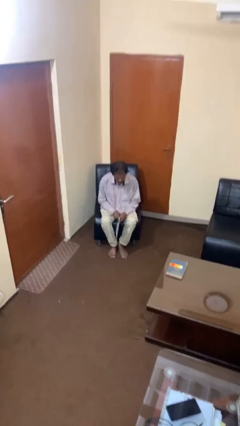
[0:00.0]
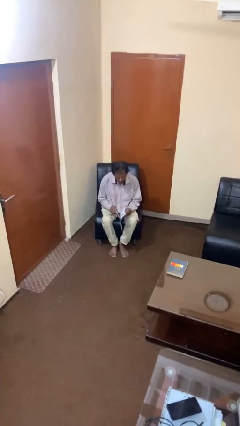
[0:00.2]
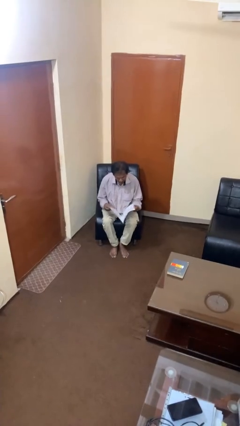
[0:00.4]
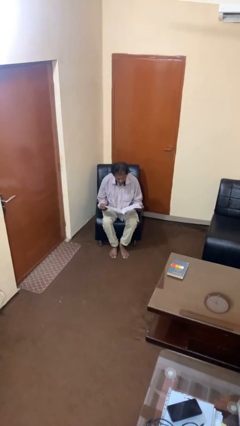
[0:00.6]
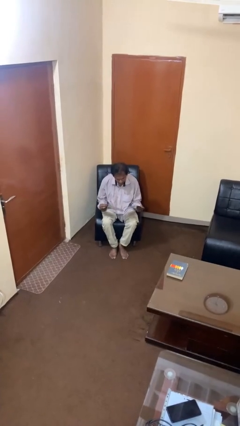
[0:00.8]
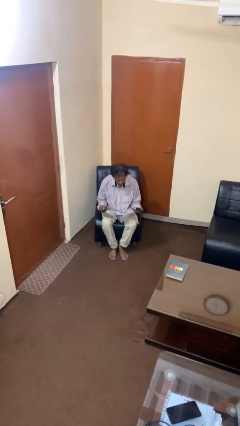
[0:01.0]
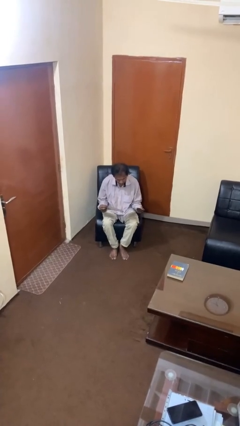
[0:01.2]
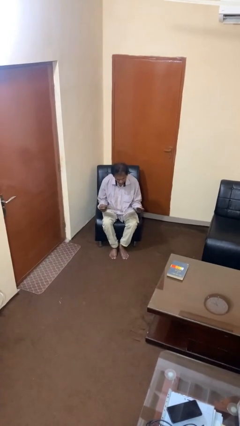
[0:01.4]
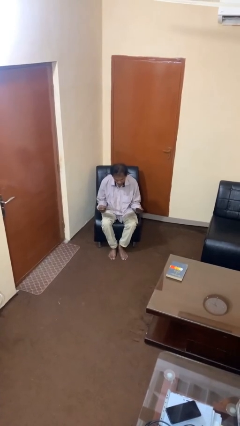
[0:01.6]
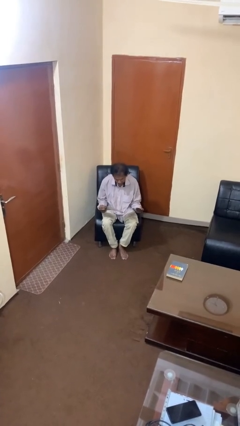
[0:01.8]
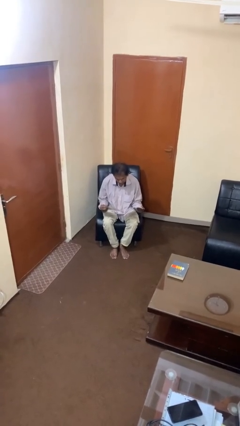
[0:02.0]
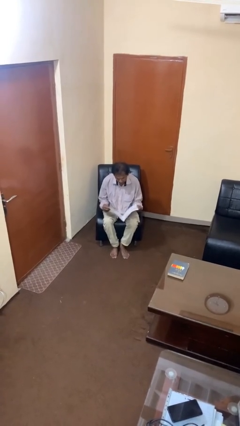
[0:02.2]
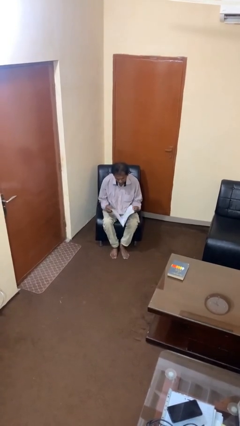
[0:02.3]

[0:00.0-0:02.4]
person reads magazine

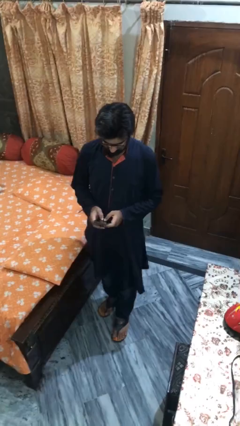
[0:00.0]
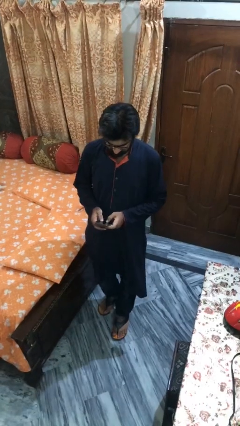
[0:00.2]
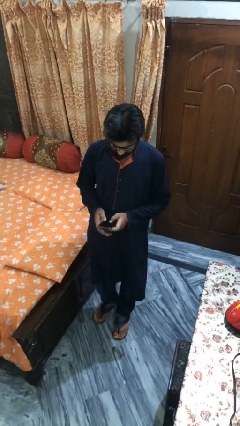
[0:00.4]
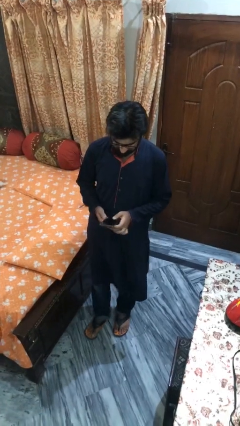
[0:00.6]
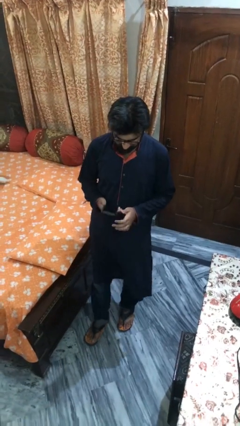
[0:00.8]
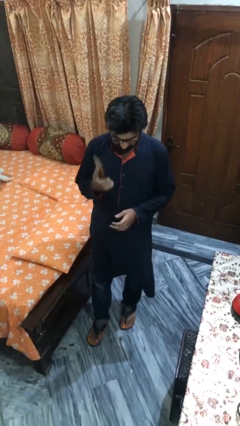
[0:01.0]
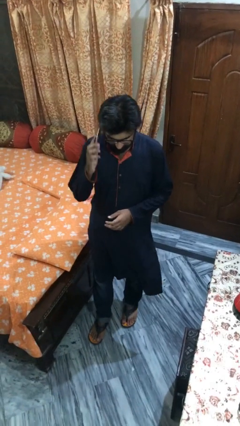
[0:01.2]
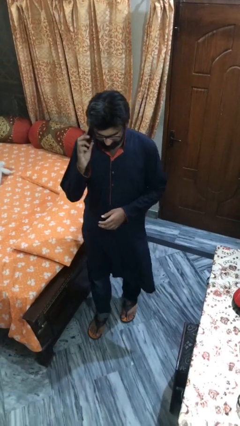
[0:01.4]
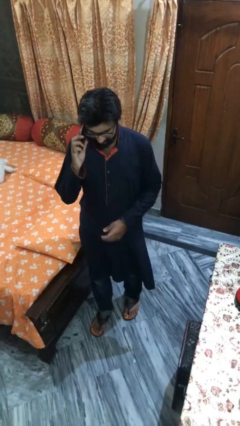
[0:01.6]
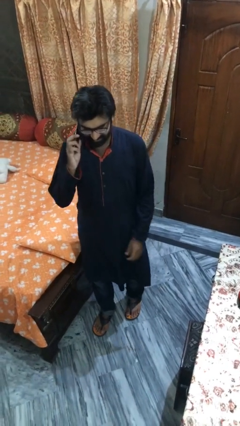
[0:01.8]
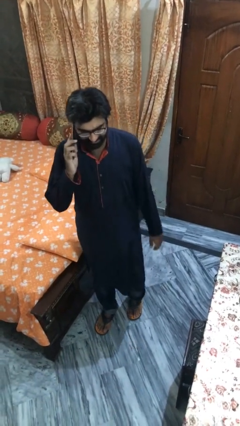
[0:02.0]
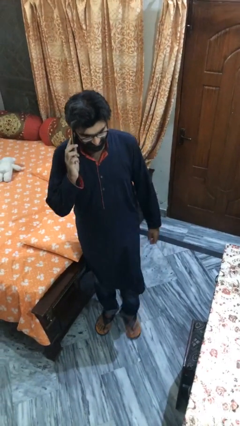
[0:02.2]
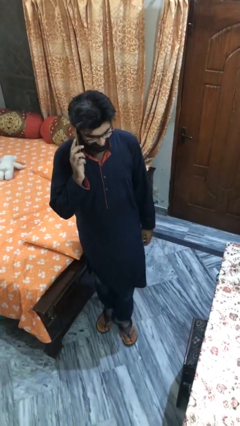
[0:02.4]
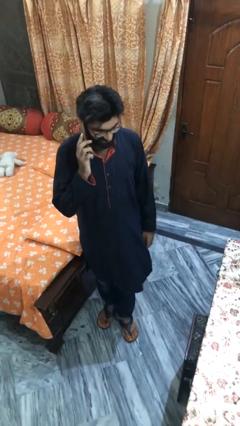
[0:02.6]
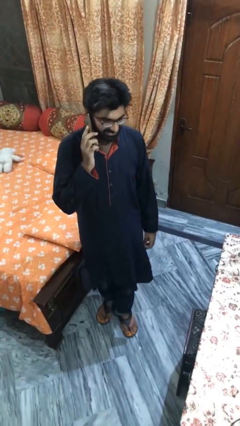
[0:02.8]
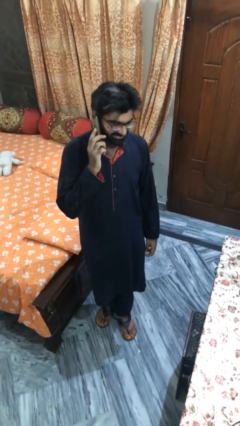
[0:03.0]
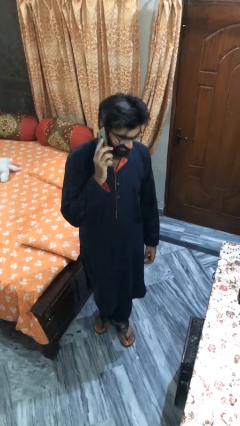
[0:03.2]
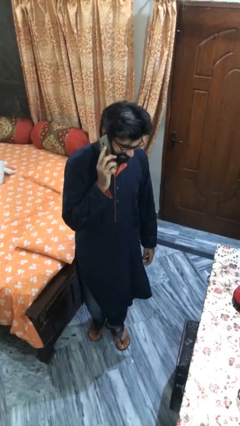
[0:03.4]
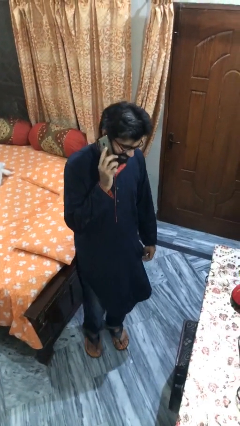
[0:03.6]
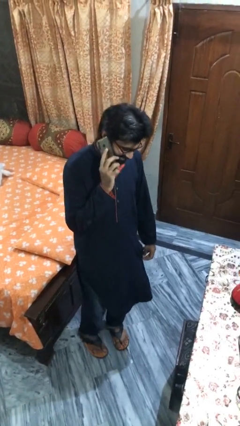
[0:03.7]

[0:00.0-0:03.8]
person talks on phone

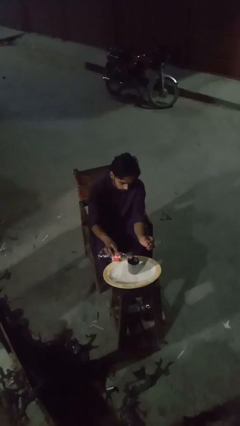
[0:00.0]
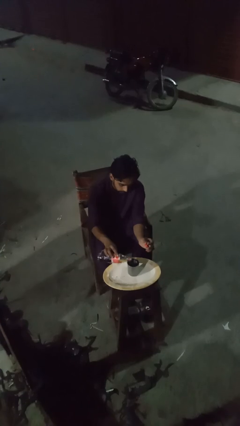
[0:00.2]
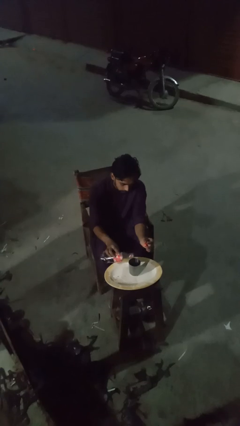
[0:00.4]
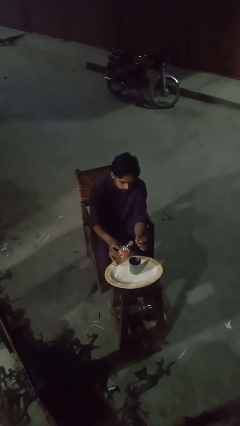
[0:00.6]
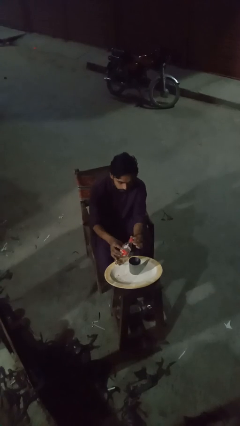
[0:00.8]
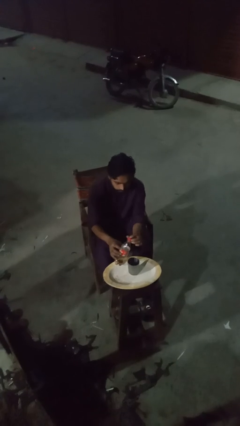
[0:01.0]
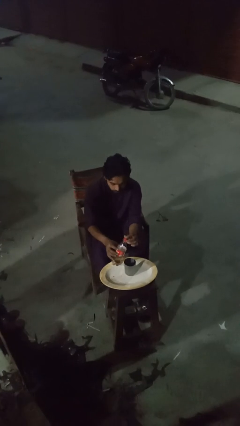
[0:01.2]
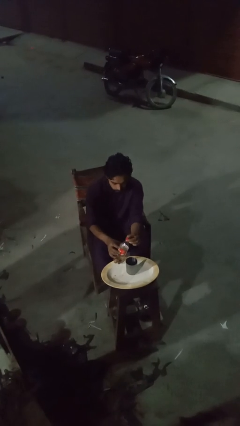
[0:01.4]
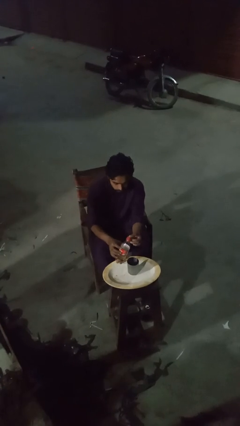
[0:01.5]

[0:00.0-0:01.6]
person screws lid to bottle

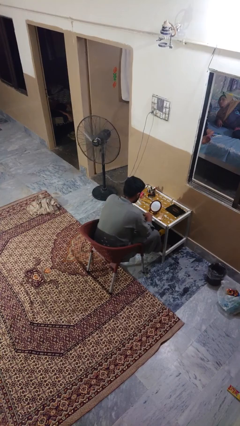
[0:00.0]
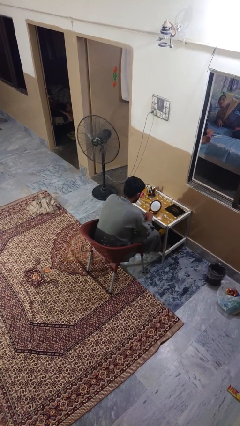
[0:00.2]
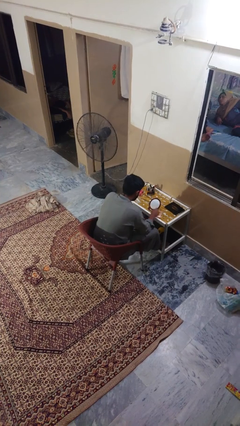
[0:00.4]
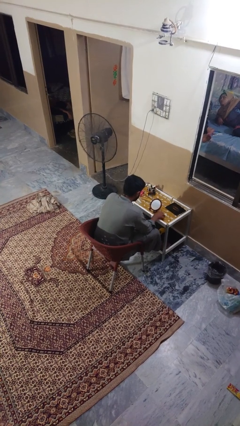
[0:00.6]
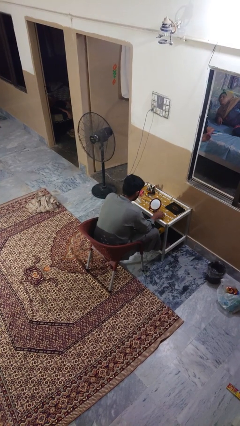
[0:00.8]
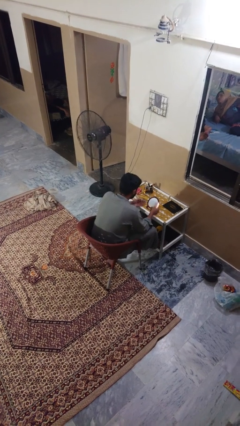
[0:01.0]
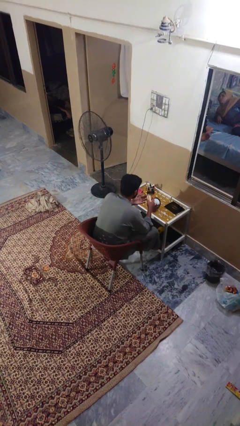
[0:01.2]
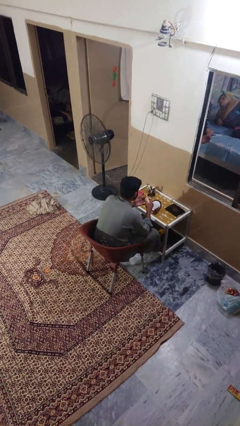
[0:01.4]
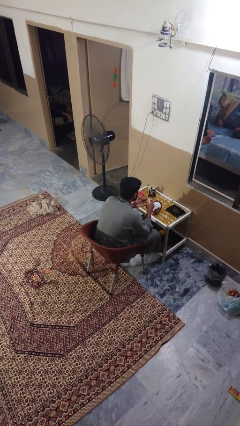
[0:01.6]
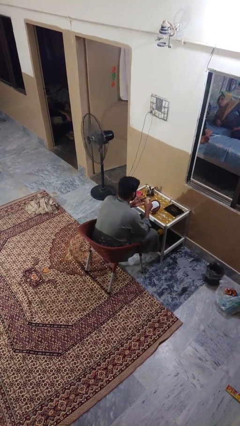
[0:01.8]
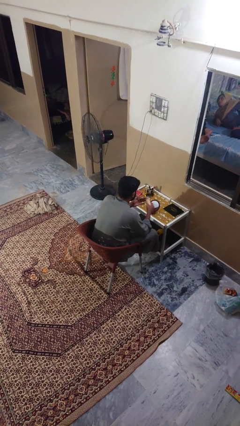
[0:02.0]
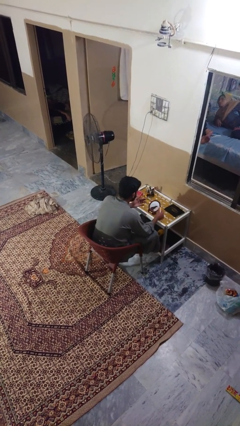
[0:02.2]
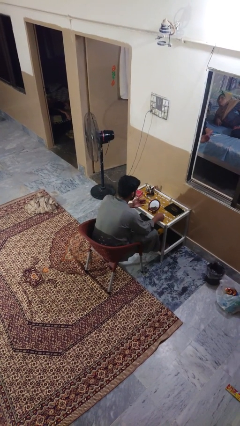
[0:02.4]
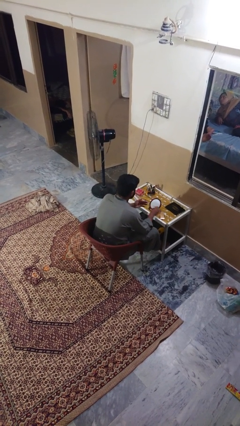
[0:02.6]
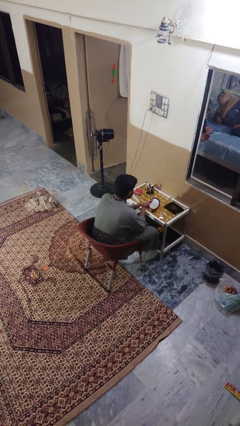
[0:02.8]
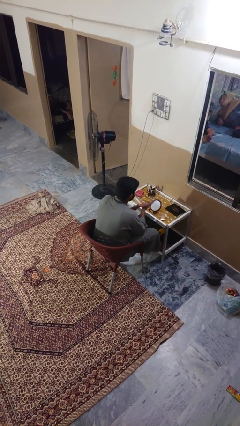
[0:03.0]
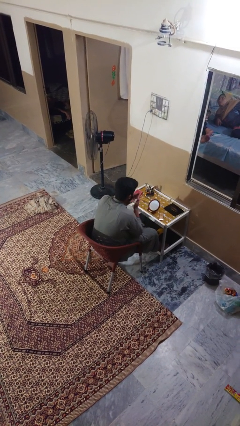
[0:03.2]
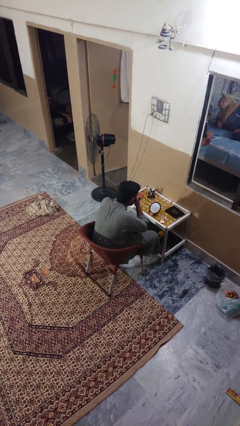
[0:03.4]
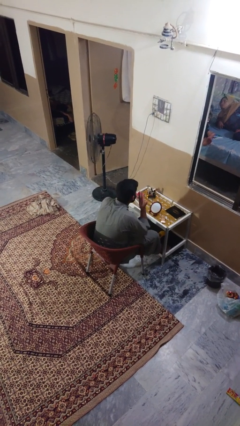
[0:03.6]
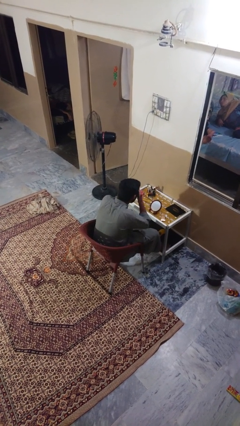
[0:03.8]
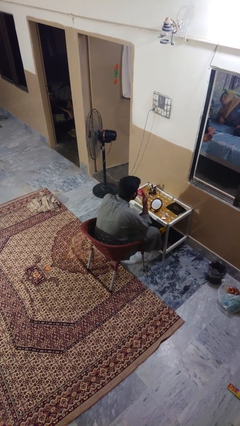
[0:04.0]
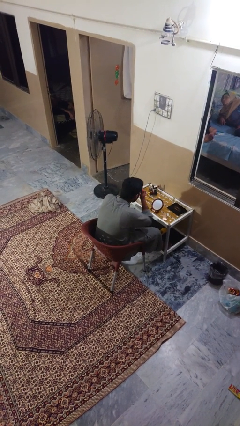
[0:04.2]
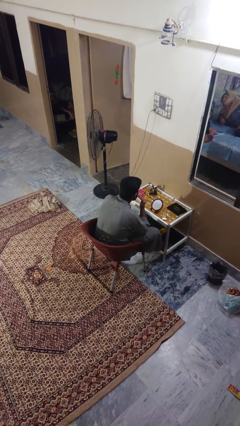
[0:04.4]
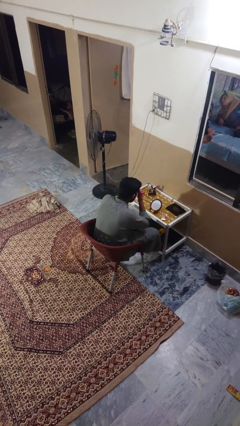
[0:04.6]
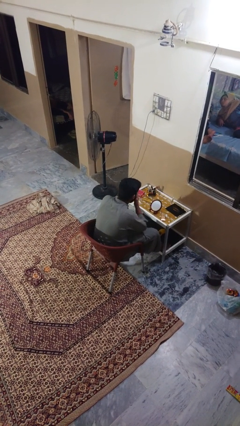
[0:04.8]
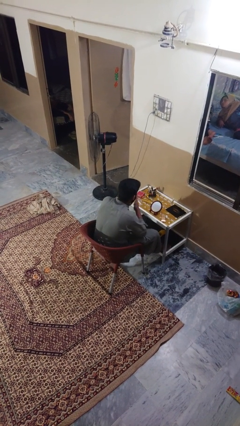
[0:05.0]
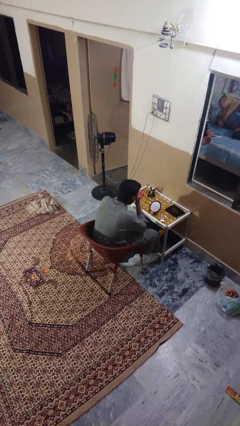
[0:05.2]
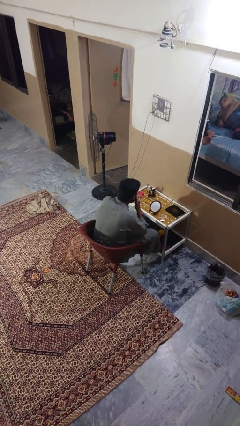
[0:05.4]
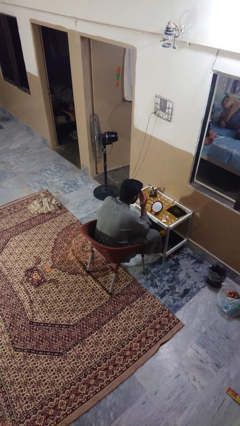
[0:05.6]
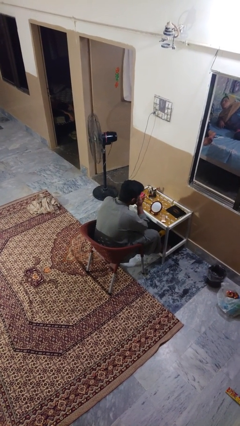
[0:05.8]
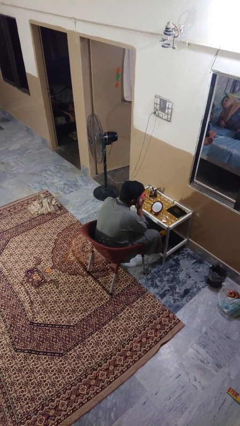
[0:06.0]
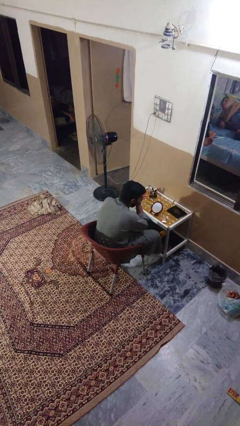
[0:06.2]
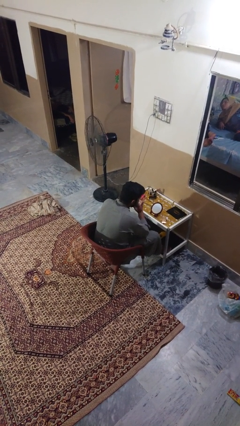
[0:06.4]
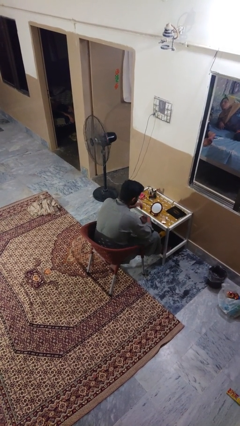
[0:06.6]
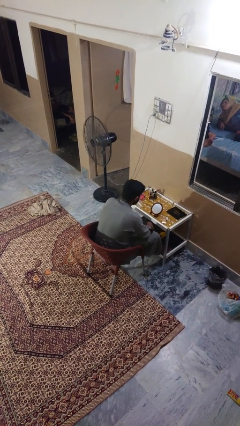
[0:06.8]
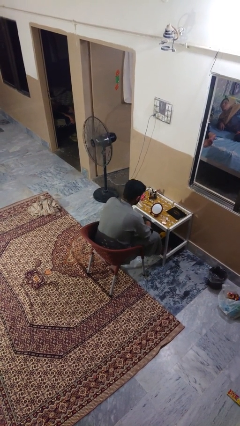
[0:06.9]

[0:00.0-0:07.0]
person applies foundation makeup

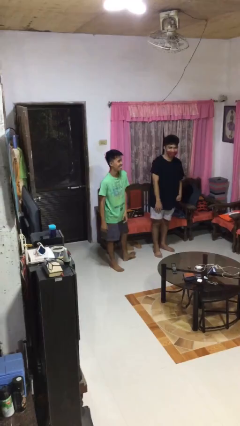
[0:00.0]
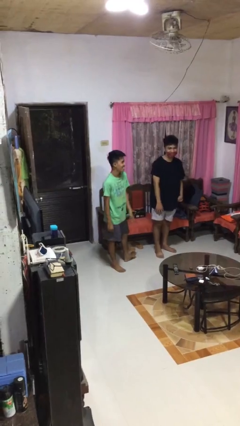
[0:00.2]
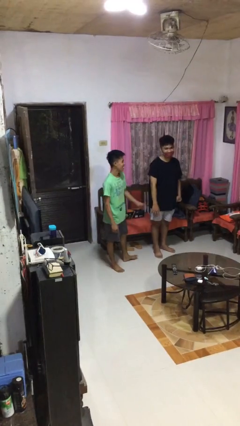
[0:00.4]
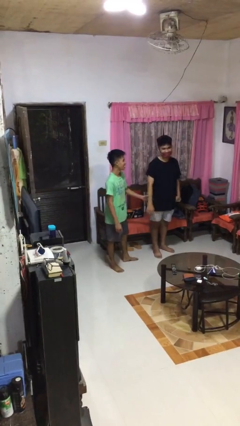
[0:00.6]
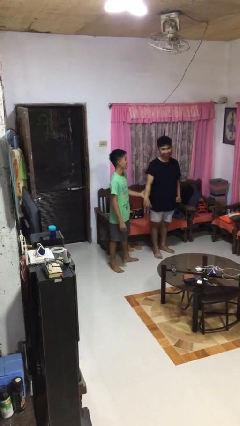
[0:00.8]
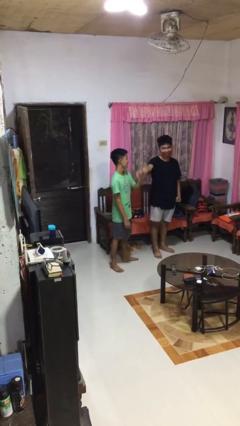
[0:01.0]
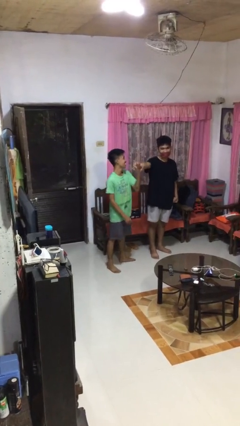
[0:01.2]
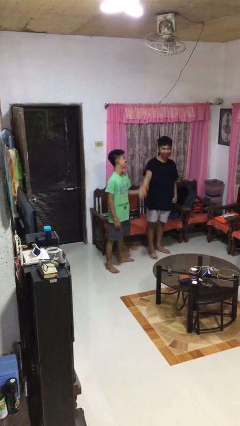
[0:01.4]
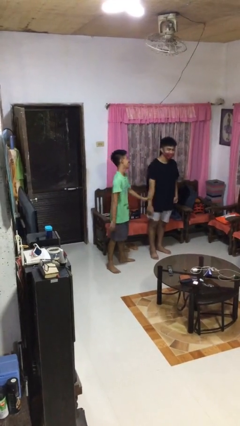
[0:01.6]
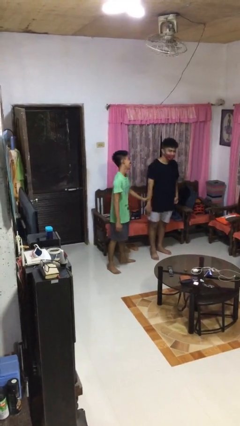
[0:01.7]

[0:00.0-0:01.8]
person grabs person by forearm

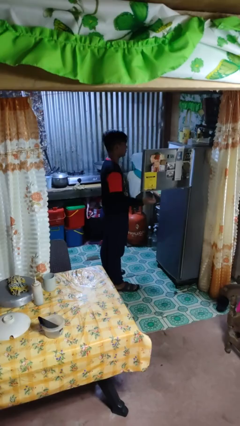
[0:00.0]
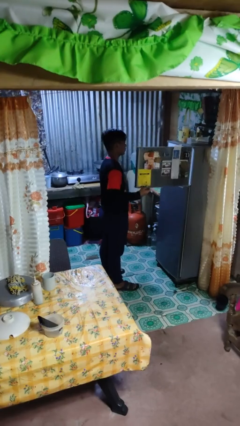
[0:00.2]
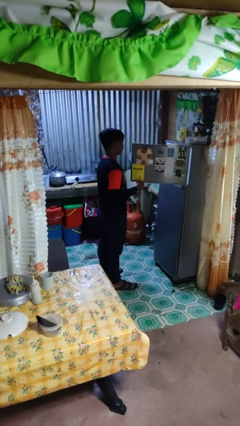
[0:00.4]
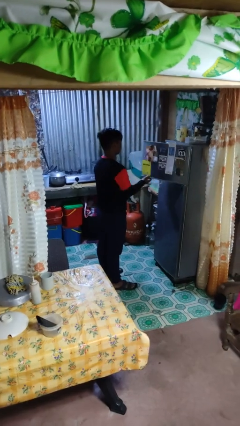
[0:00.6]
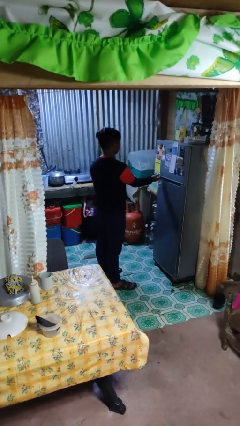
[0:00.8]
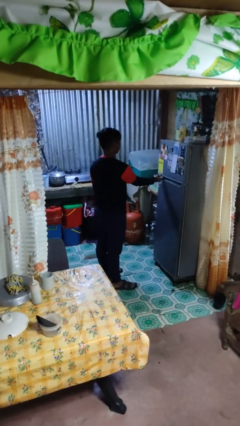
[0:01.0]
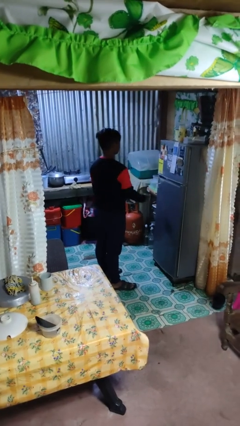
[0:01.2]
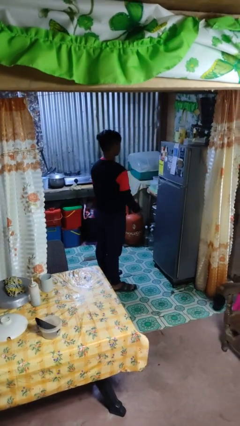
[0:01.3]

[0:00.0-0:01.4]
person closes refrigerator
